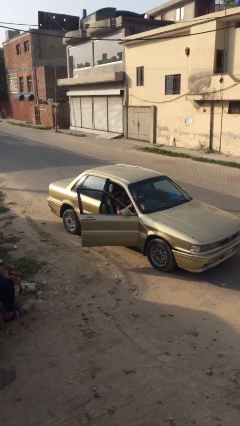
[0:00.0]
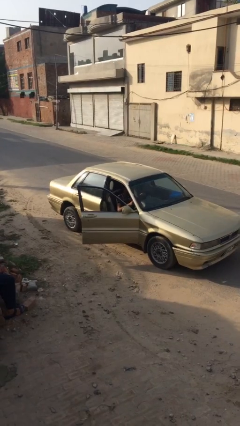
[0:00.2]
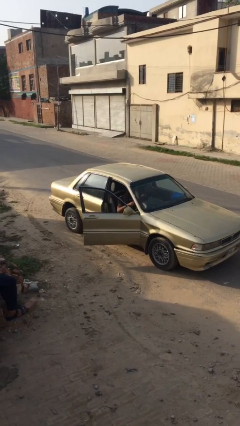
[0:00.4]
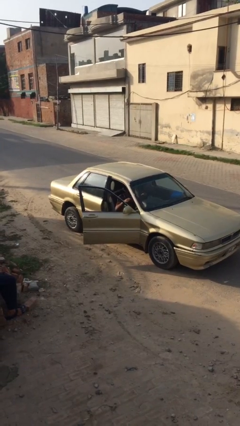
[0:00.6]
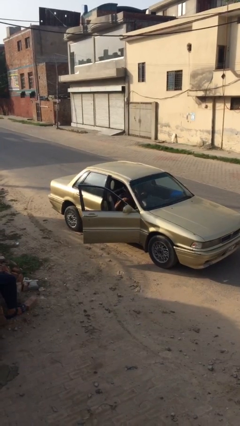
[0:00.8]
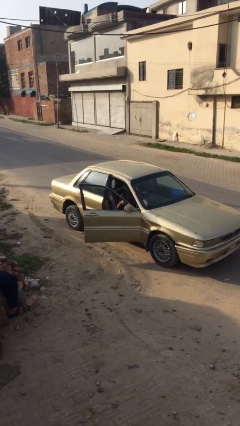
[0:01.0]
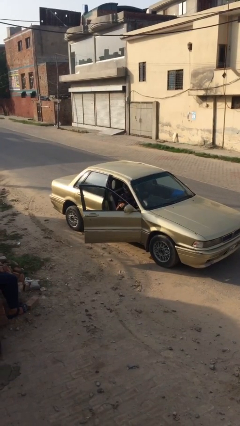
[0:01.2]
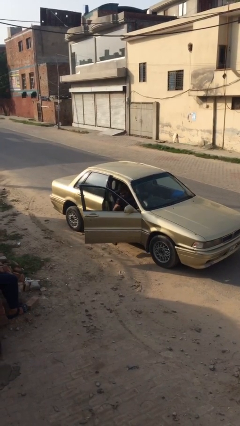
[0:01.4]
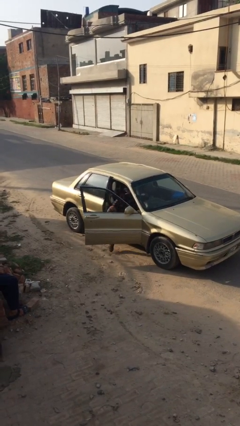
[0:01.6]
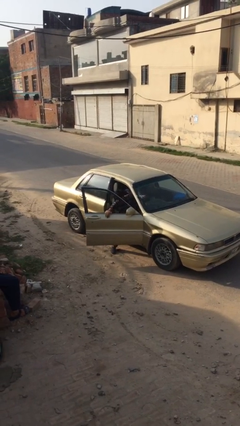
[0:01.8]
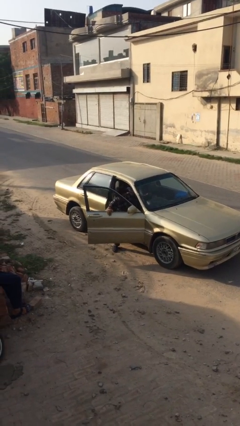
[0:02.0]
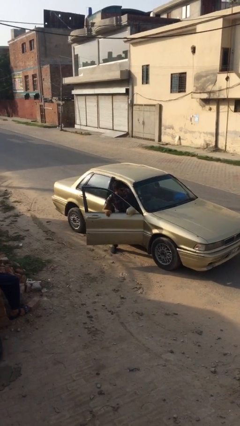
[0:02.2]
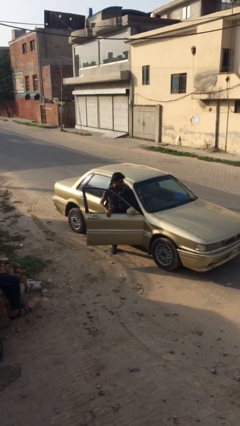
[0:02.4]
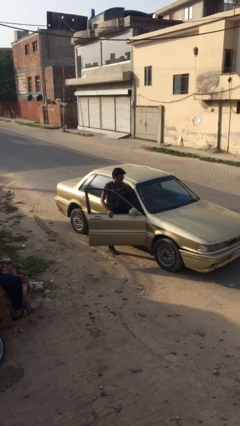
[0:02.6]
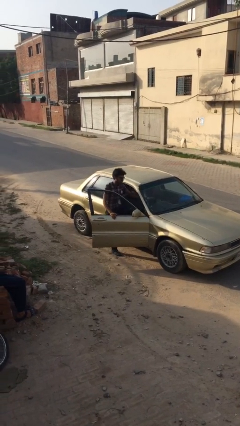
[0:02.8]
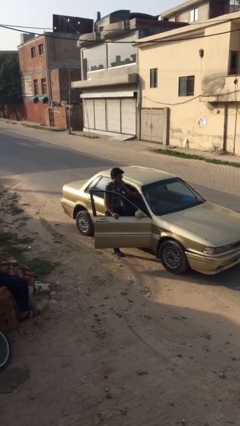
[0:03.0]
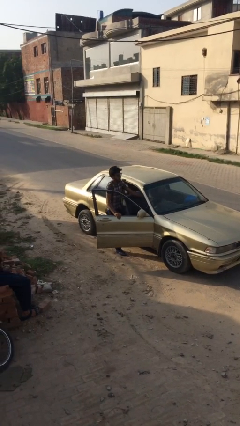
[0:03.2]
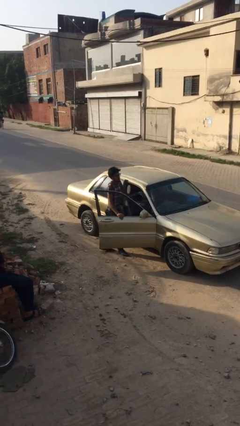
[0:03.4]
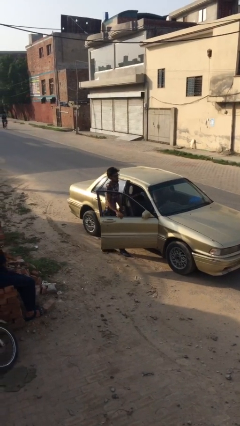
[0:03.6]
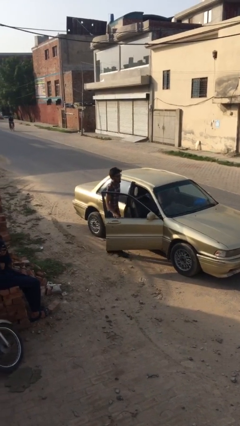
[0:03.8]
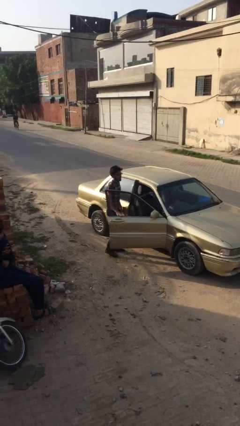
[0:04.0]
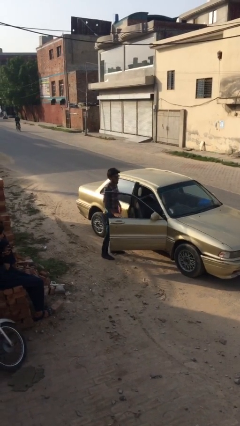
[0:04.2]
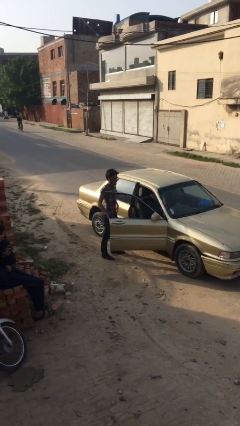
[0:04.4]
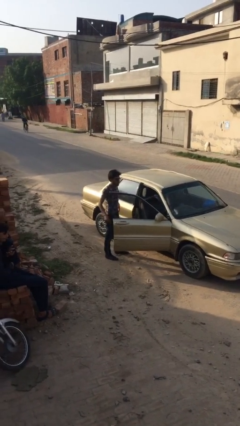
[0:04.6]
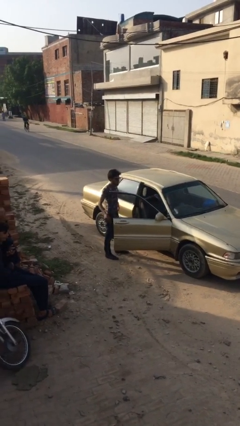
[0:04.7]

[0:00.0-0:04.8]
person exits car

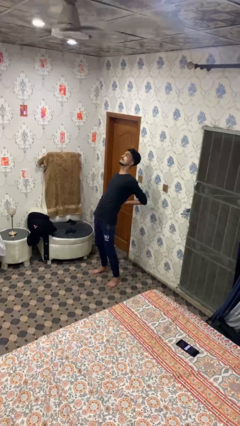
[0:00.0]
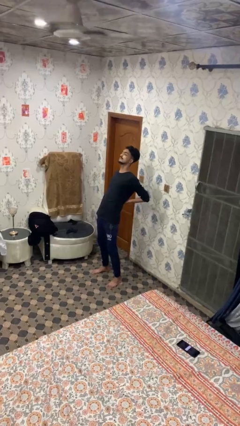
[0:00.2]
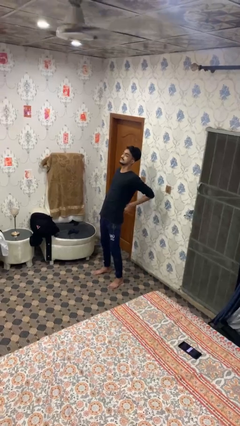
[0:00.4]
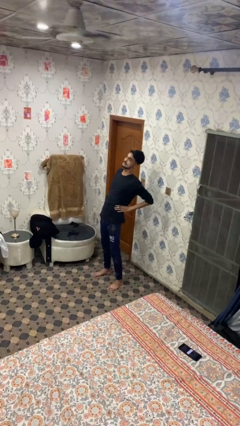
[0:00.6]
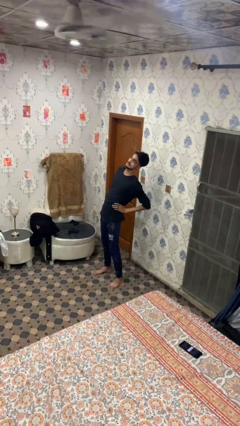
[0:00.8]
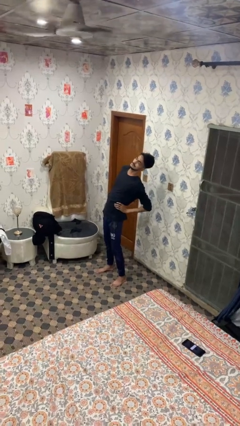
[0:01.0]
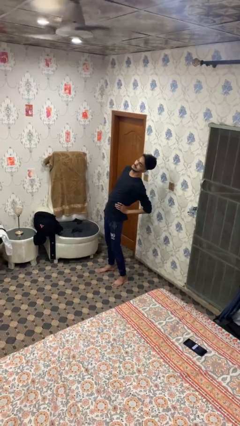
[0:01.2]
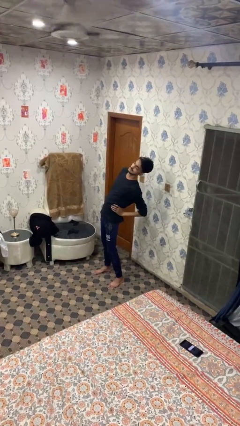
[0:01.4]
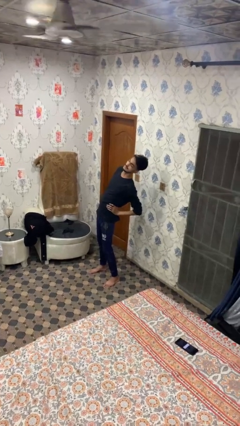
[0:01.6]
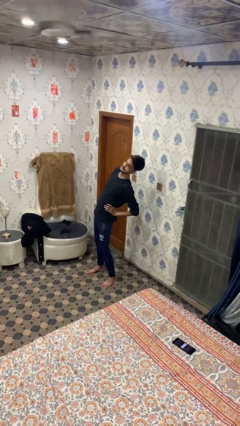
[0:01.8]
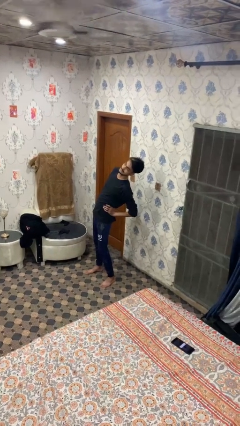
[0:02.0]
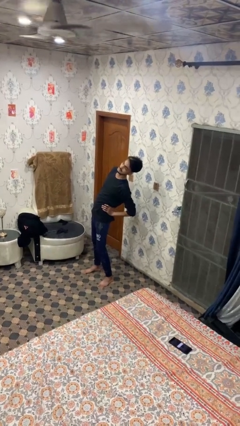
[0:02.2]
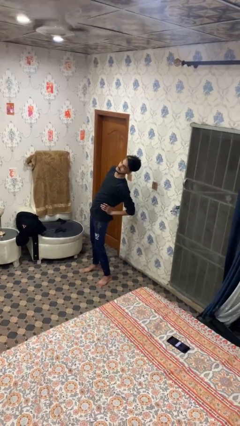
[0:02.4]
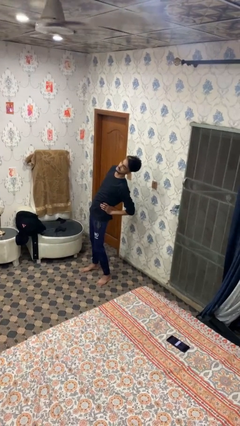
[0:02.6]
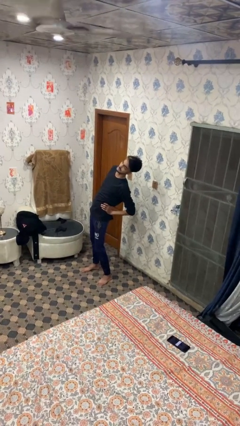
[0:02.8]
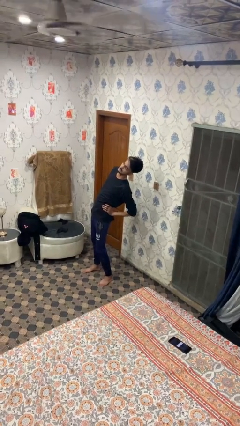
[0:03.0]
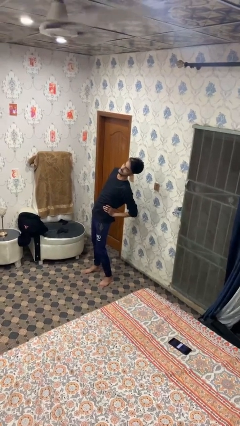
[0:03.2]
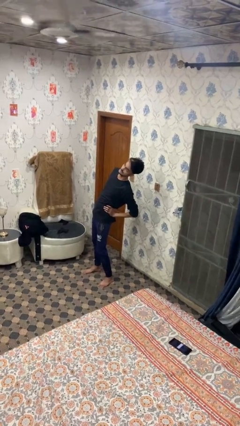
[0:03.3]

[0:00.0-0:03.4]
person stretches arms to side

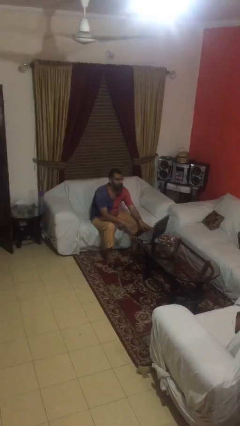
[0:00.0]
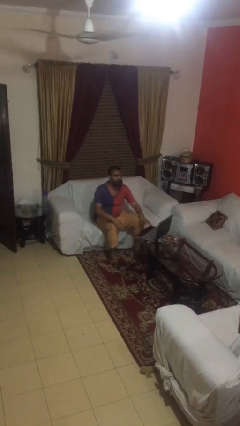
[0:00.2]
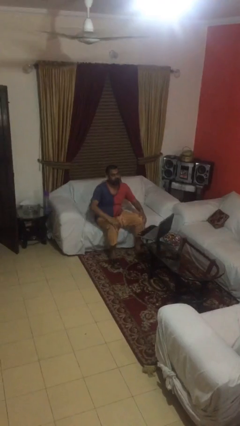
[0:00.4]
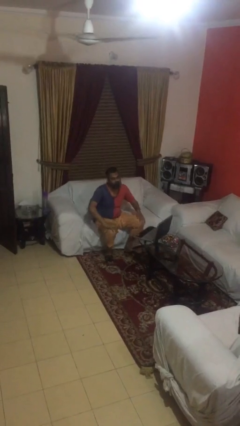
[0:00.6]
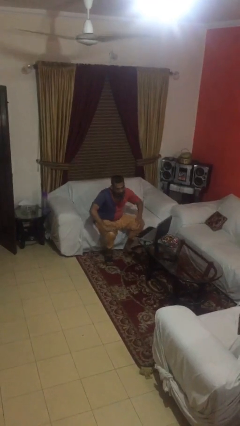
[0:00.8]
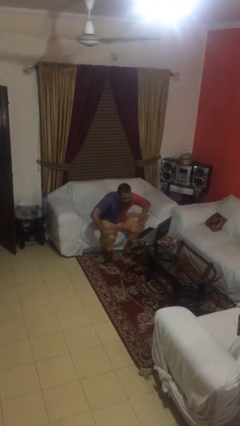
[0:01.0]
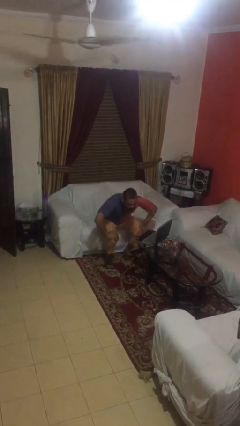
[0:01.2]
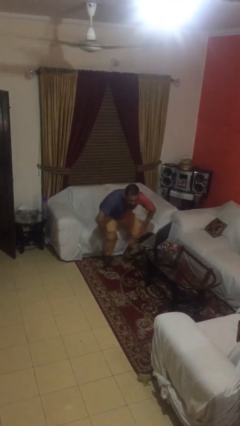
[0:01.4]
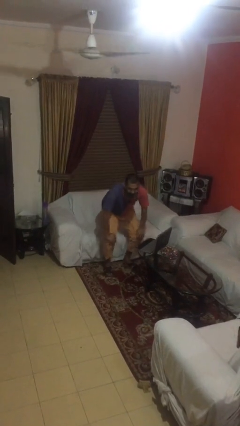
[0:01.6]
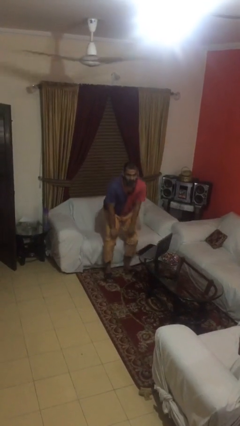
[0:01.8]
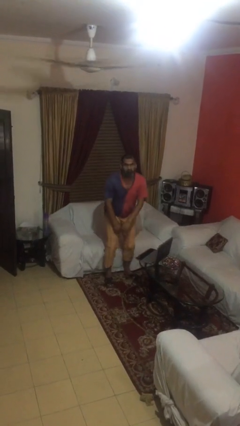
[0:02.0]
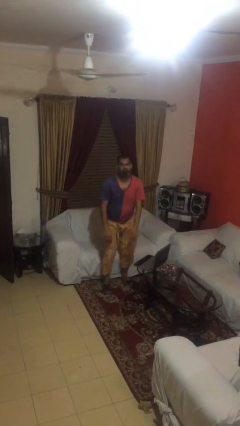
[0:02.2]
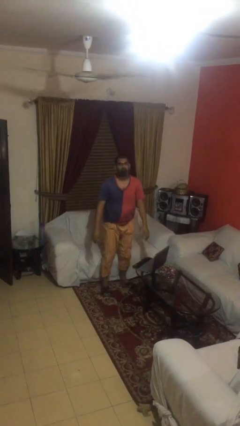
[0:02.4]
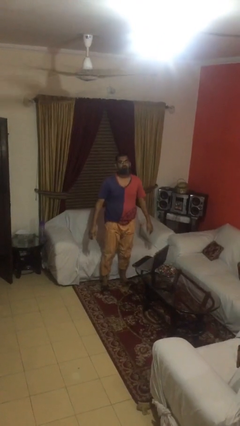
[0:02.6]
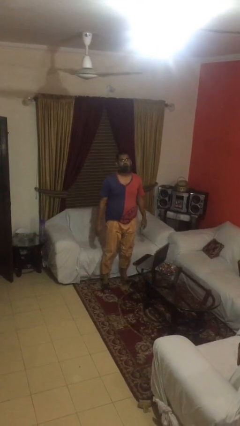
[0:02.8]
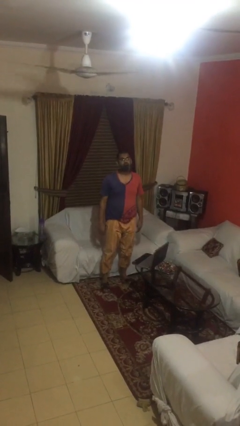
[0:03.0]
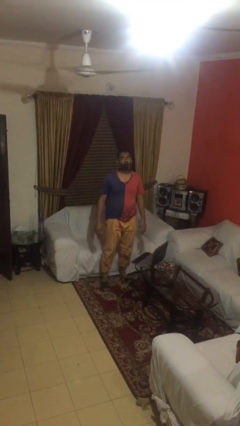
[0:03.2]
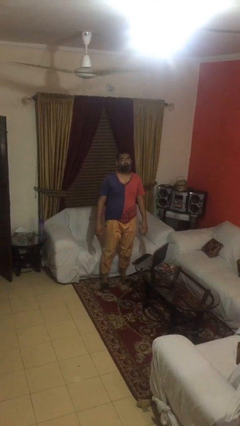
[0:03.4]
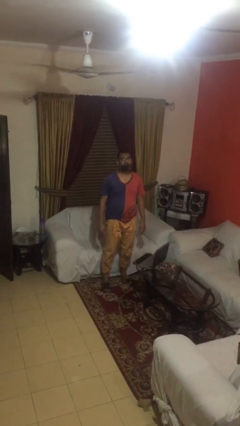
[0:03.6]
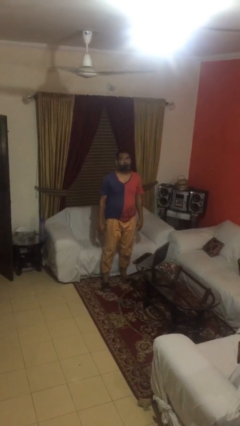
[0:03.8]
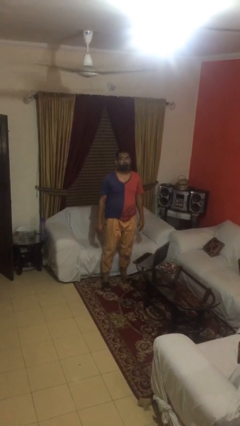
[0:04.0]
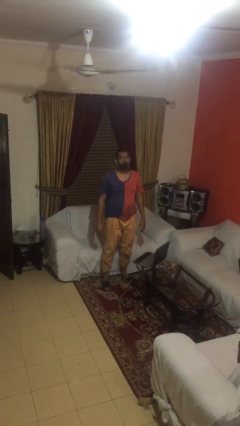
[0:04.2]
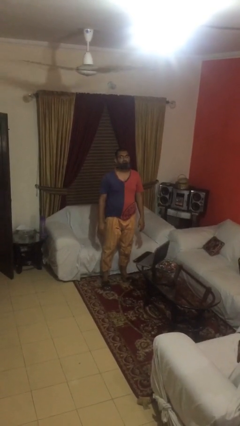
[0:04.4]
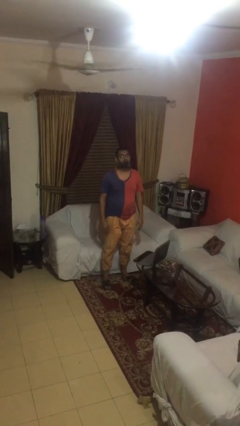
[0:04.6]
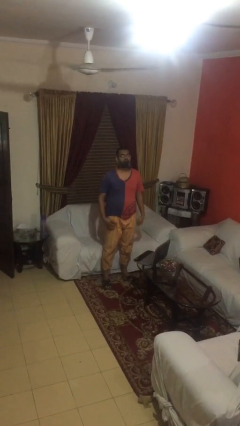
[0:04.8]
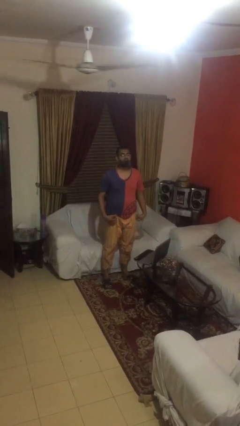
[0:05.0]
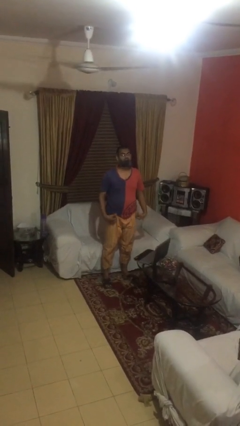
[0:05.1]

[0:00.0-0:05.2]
person stands up

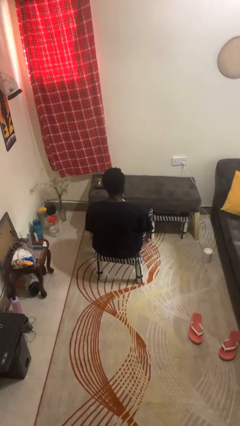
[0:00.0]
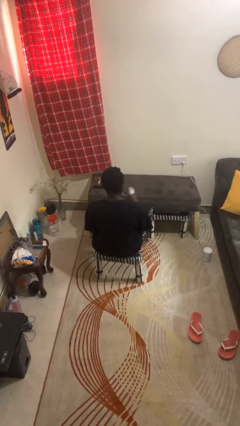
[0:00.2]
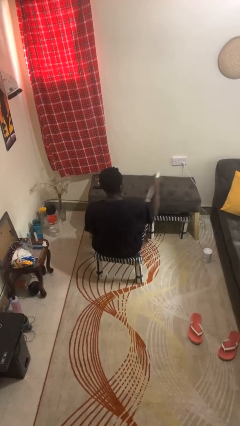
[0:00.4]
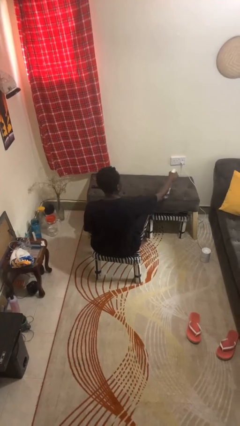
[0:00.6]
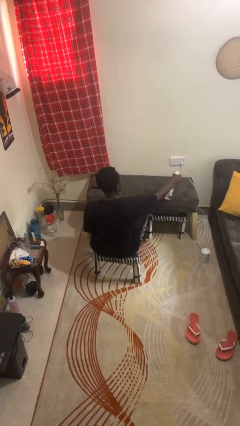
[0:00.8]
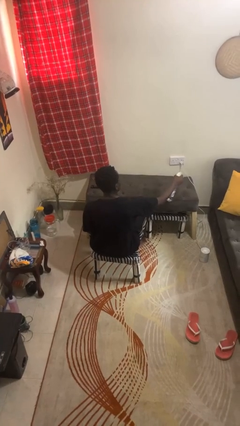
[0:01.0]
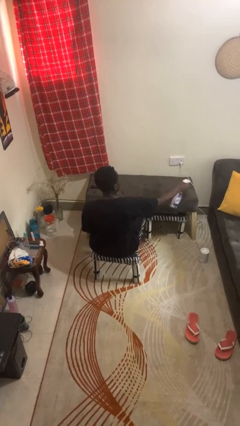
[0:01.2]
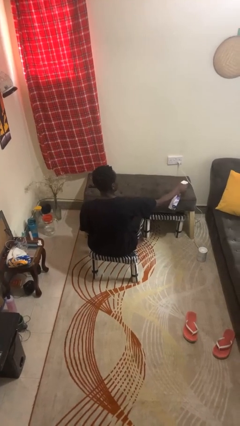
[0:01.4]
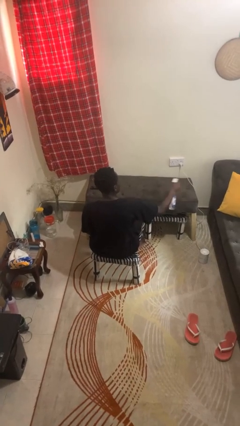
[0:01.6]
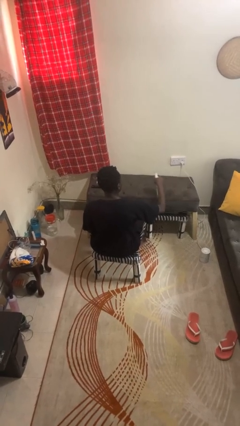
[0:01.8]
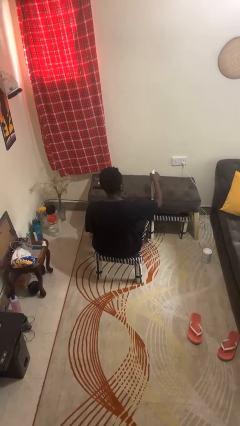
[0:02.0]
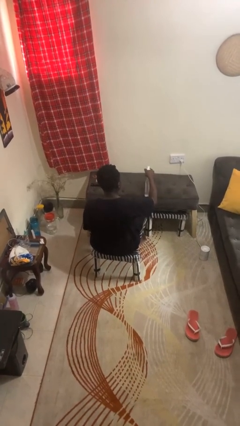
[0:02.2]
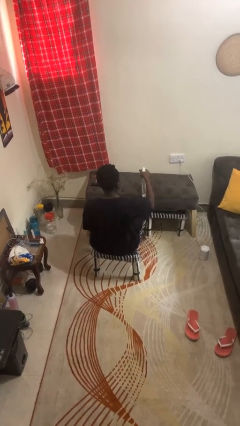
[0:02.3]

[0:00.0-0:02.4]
person sprays from bottle

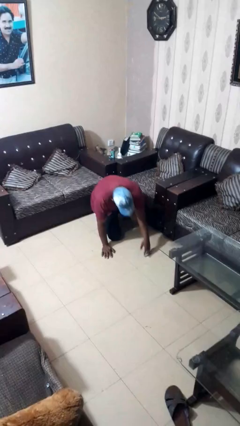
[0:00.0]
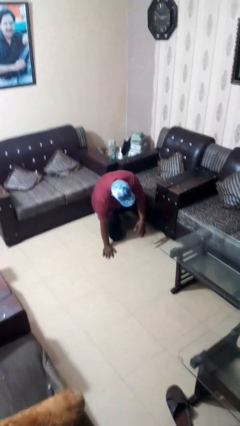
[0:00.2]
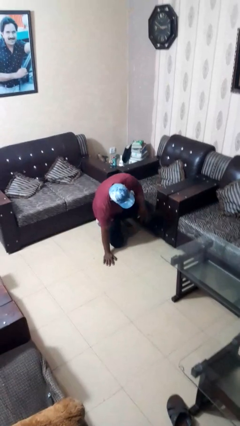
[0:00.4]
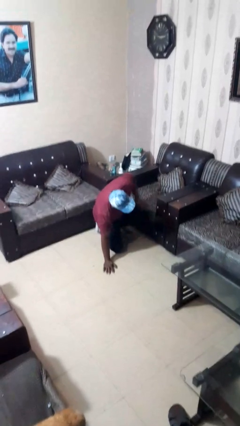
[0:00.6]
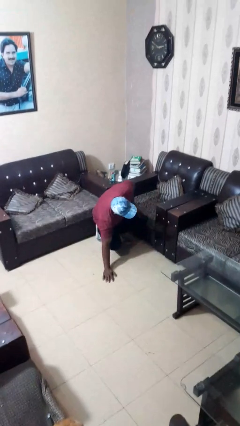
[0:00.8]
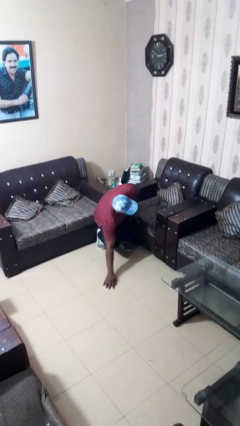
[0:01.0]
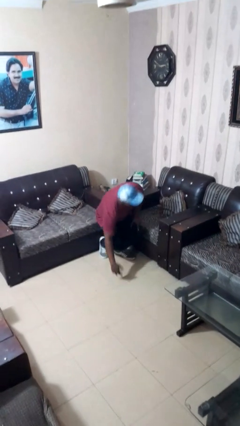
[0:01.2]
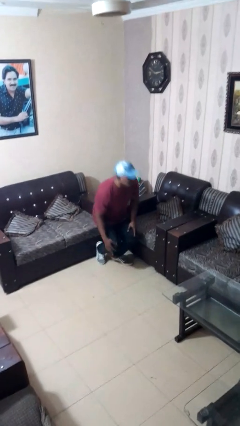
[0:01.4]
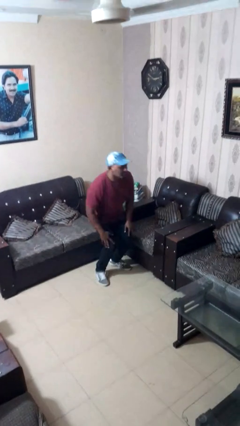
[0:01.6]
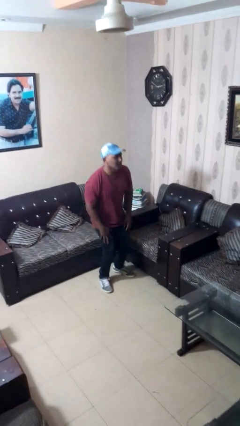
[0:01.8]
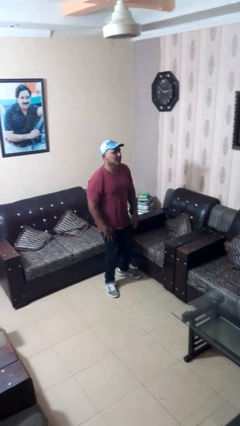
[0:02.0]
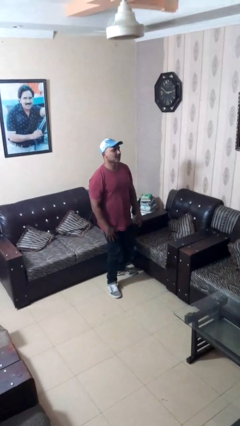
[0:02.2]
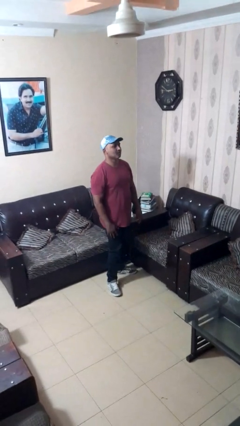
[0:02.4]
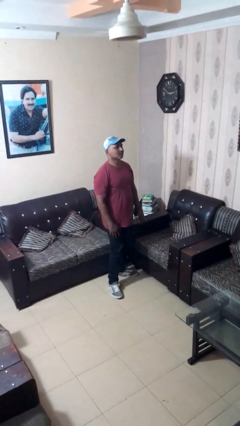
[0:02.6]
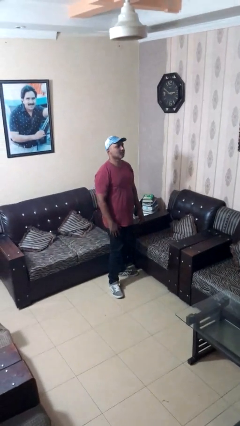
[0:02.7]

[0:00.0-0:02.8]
person stands up from floor
